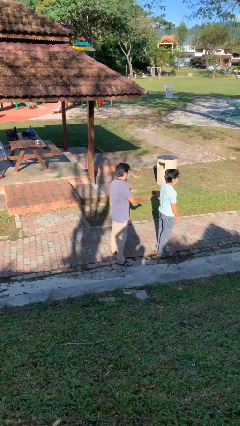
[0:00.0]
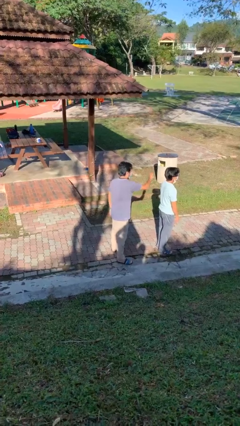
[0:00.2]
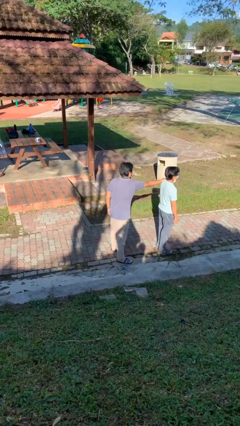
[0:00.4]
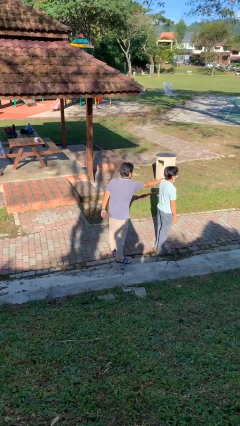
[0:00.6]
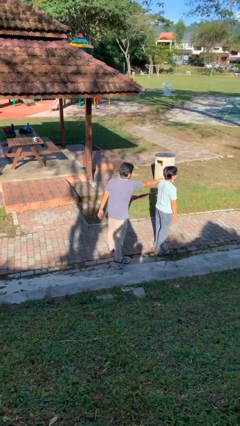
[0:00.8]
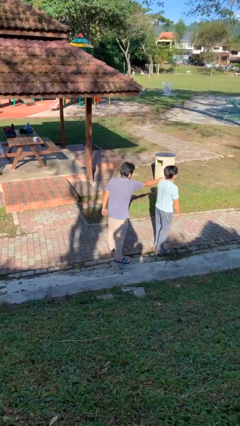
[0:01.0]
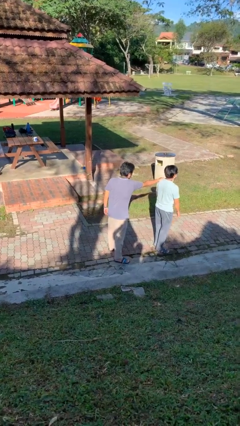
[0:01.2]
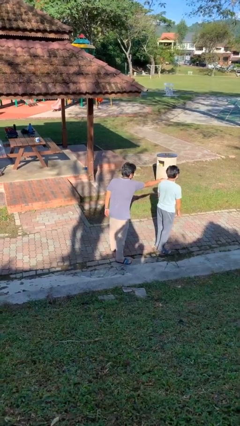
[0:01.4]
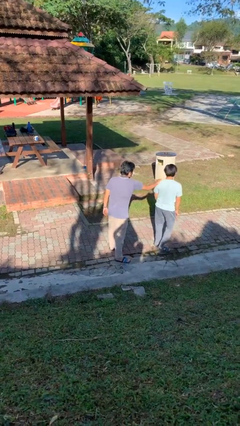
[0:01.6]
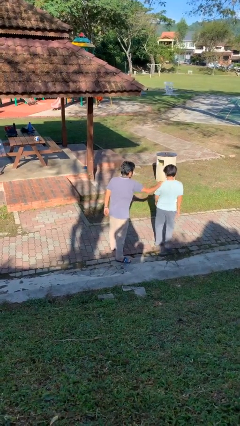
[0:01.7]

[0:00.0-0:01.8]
person grabs person by shoulder

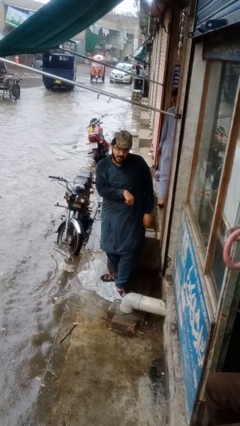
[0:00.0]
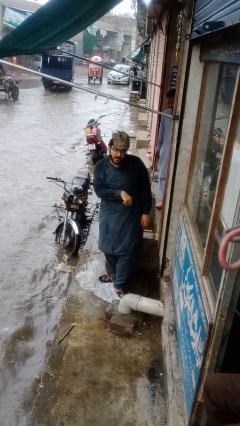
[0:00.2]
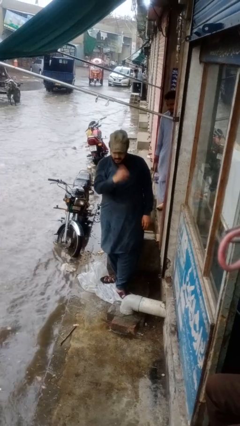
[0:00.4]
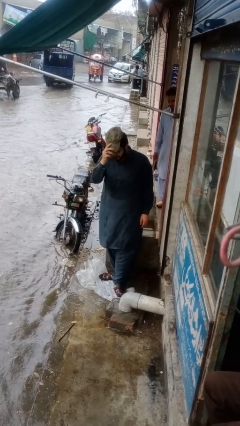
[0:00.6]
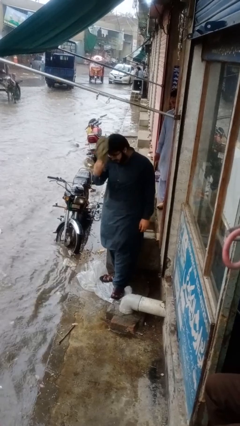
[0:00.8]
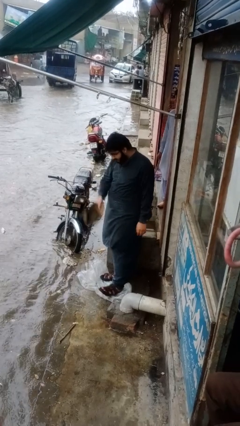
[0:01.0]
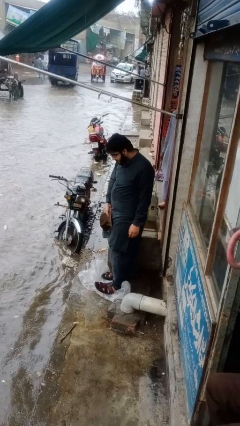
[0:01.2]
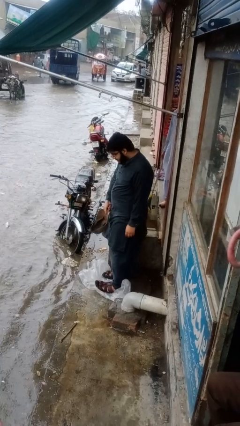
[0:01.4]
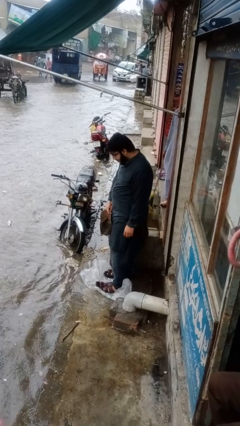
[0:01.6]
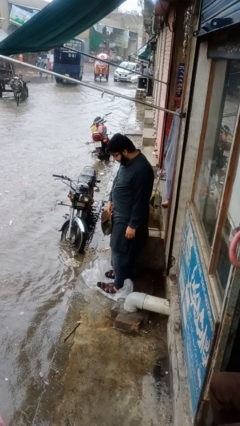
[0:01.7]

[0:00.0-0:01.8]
person takes off hat

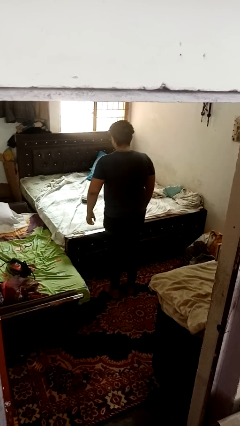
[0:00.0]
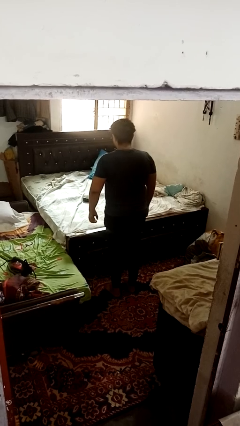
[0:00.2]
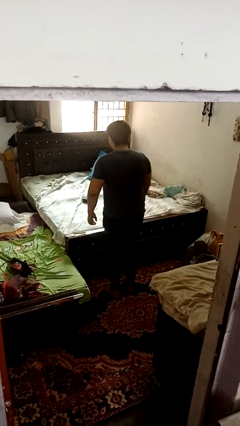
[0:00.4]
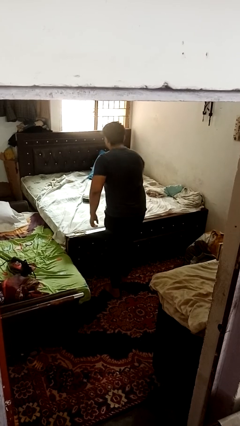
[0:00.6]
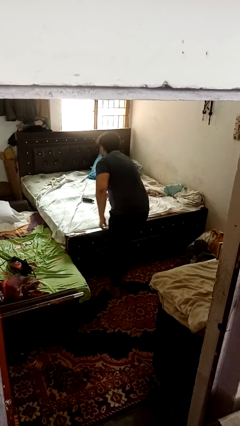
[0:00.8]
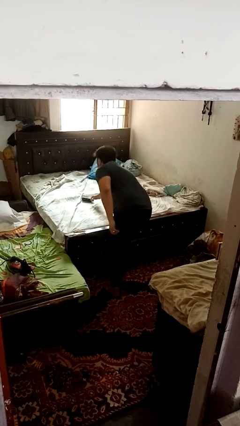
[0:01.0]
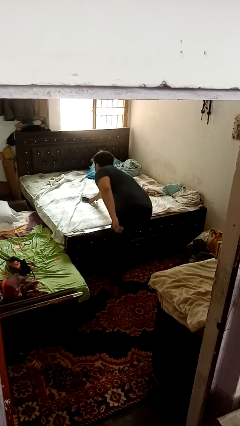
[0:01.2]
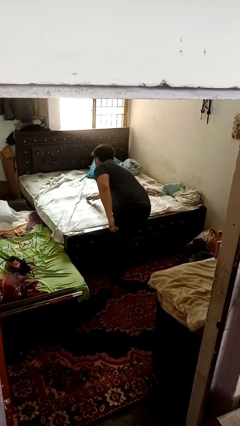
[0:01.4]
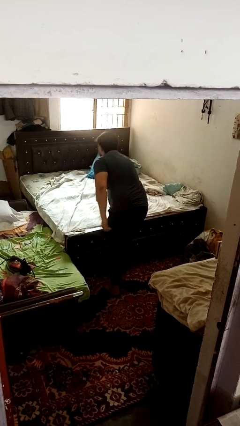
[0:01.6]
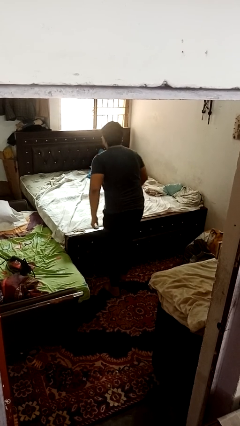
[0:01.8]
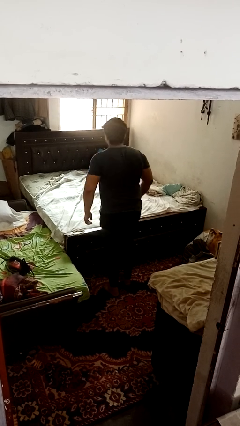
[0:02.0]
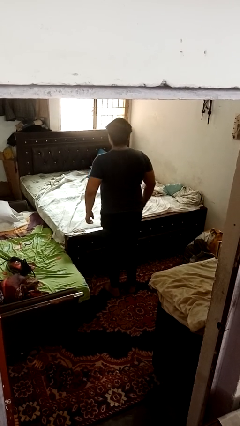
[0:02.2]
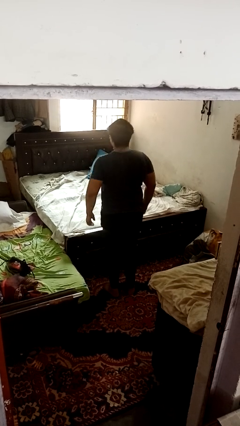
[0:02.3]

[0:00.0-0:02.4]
person picks up object from bed

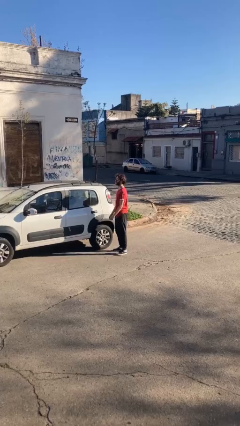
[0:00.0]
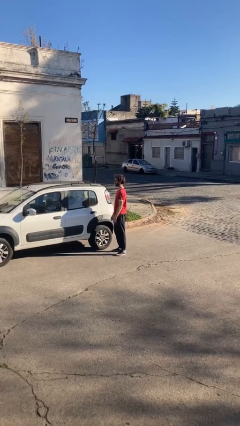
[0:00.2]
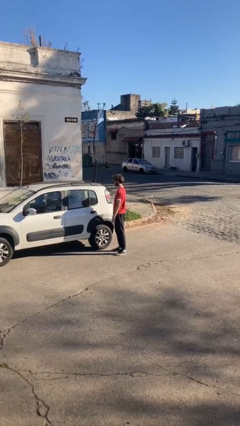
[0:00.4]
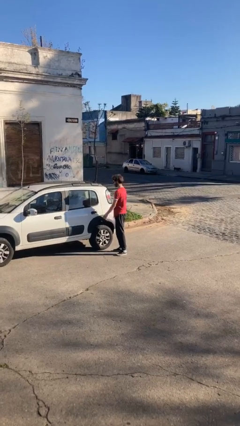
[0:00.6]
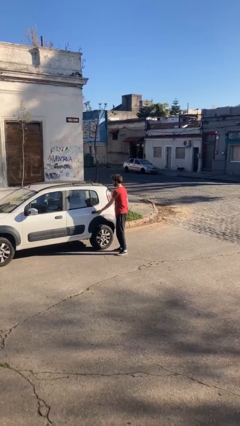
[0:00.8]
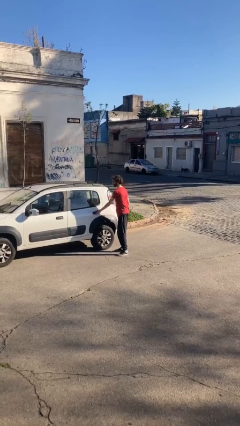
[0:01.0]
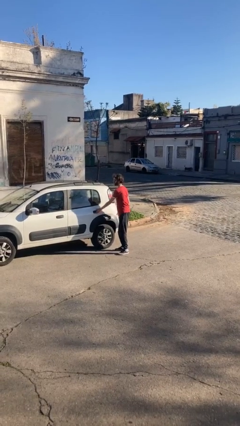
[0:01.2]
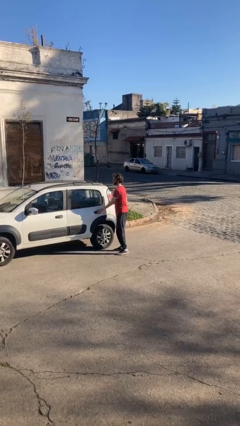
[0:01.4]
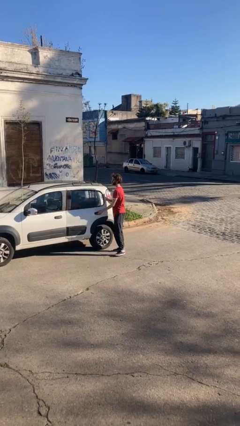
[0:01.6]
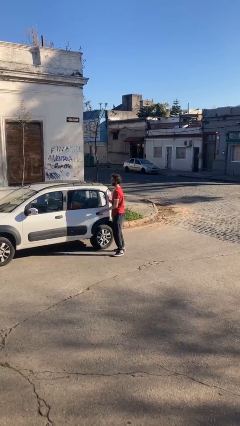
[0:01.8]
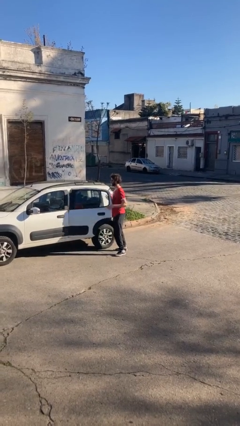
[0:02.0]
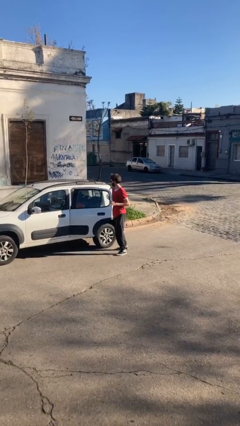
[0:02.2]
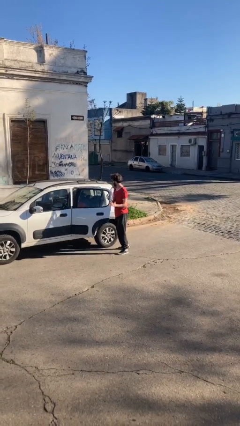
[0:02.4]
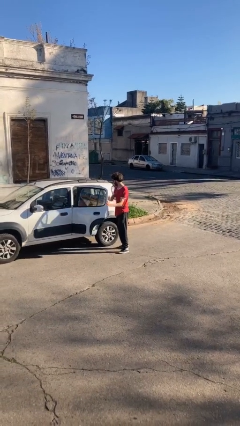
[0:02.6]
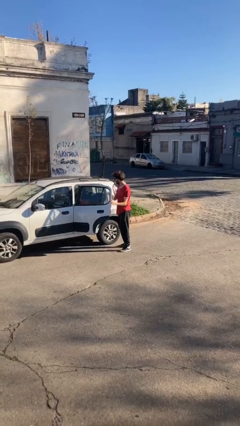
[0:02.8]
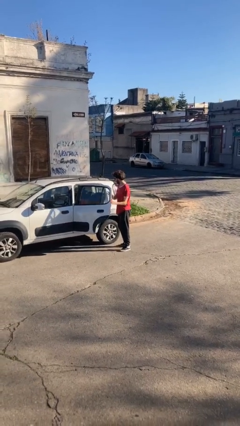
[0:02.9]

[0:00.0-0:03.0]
person opens car door

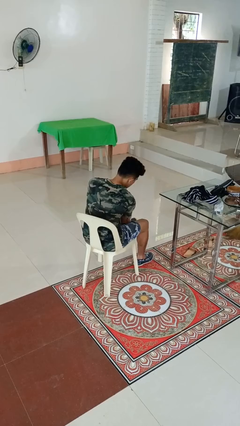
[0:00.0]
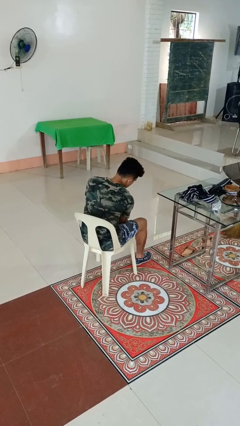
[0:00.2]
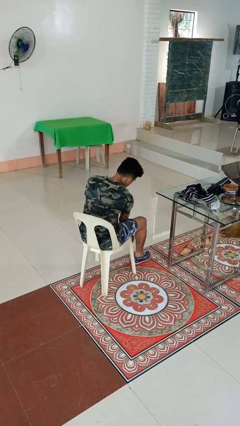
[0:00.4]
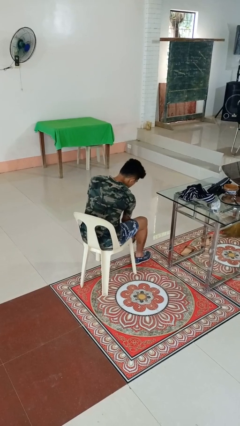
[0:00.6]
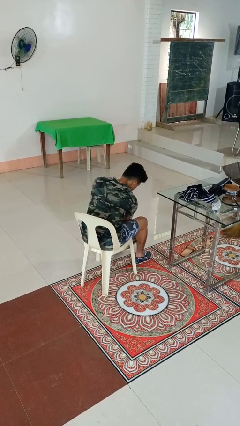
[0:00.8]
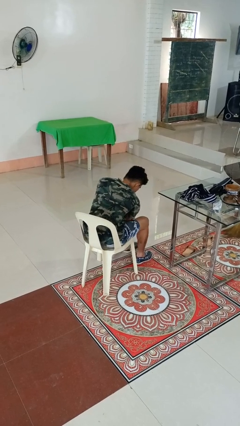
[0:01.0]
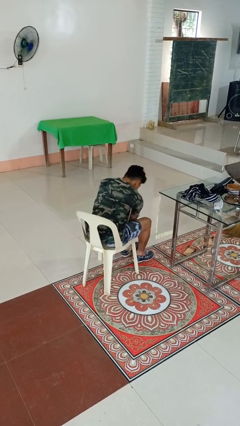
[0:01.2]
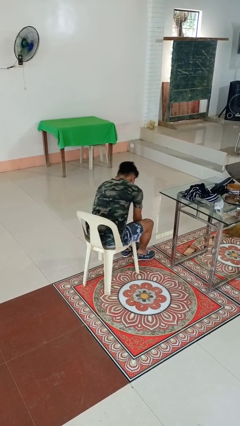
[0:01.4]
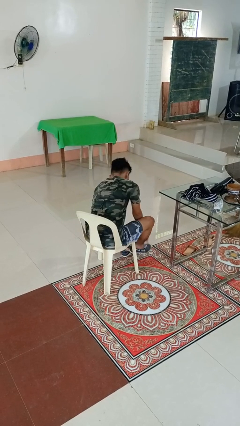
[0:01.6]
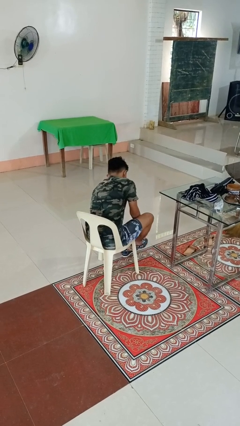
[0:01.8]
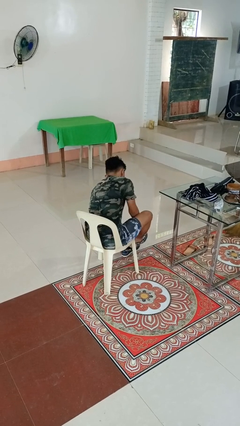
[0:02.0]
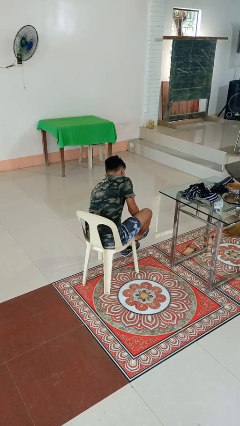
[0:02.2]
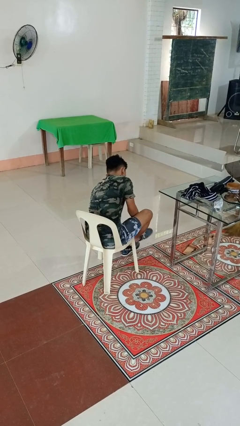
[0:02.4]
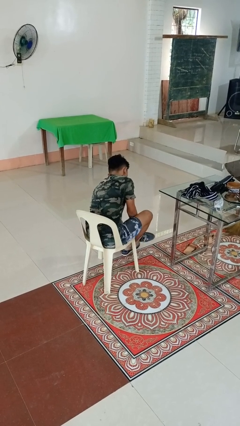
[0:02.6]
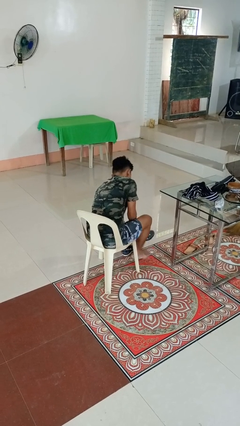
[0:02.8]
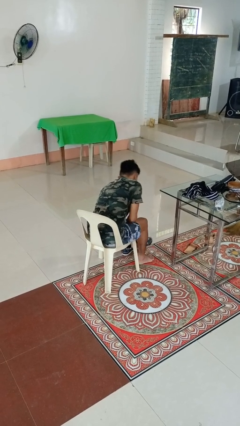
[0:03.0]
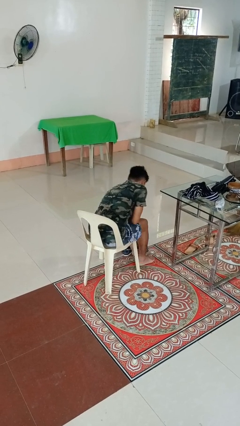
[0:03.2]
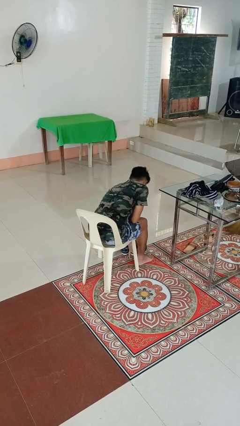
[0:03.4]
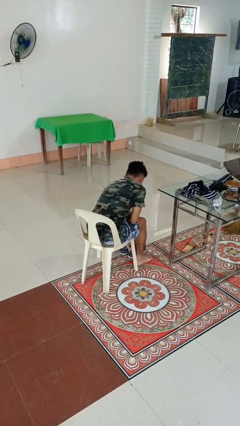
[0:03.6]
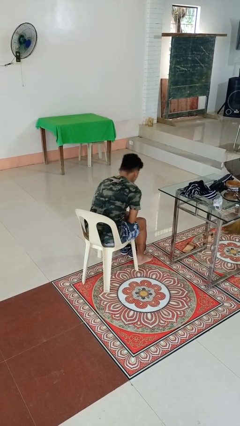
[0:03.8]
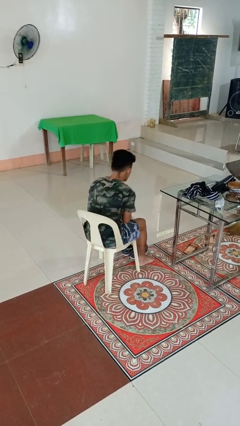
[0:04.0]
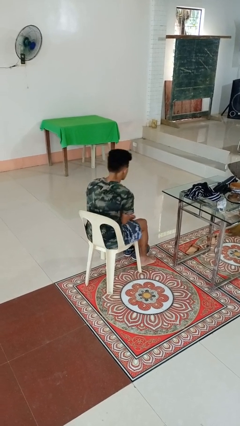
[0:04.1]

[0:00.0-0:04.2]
person takes off shoes

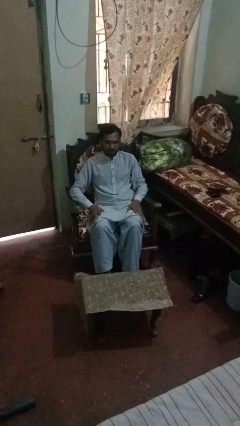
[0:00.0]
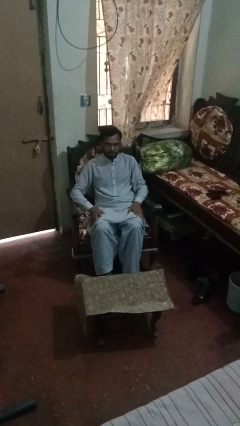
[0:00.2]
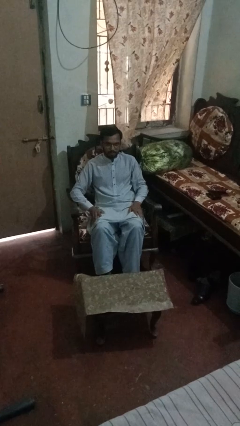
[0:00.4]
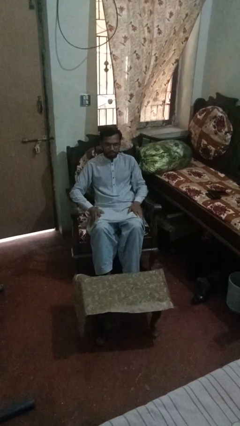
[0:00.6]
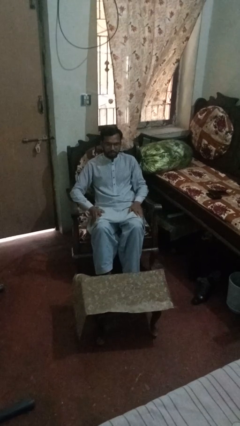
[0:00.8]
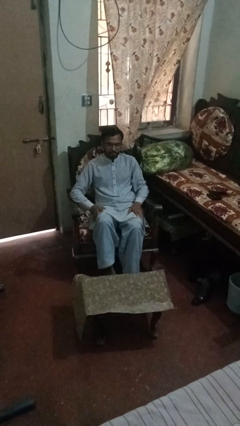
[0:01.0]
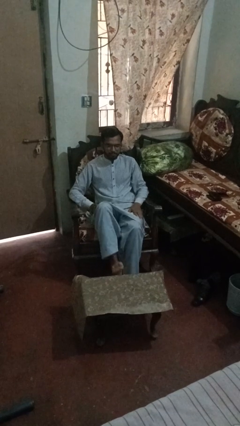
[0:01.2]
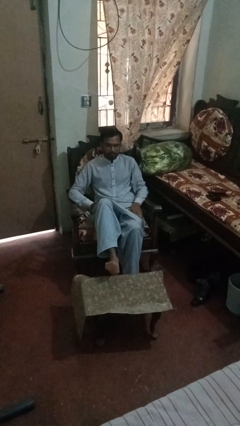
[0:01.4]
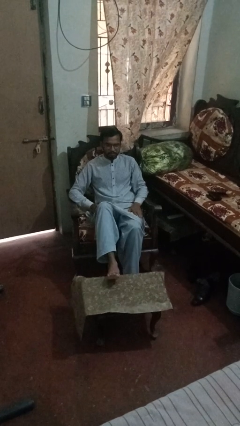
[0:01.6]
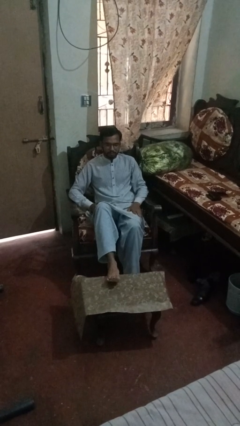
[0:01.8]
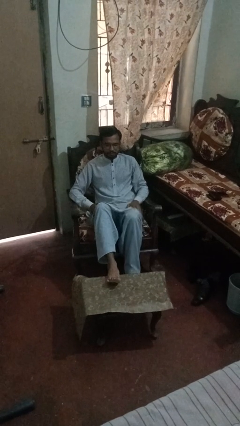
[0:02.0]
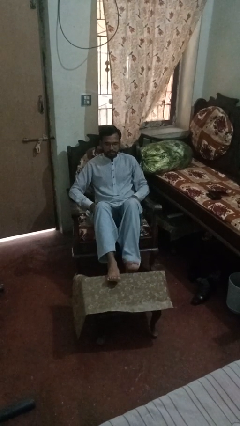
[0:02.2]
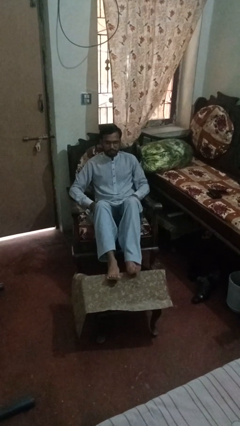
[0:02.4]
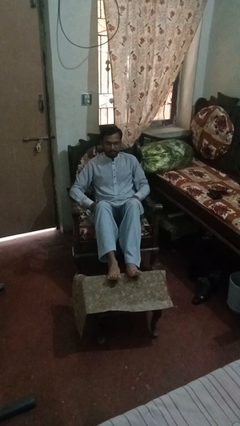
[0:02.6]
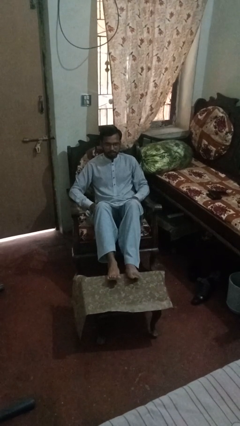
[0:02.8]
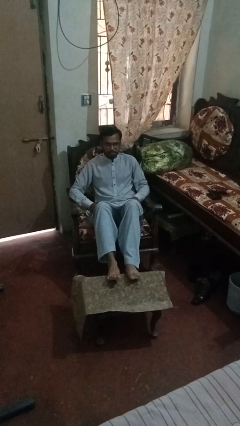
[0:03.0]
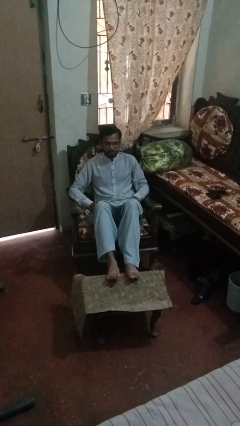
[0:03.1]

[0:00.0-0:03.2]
person puts feet up

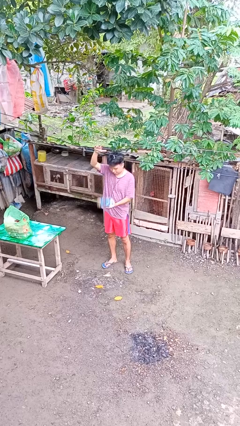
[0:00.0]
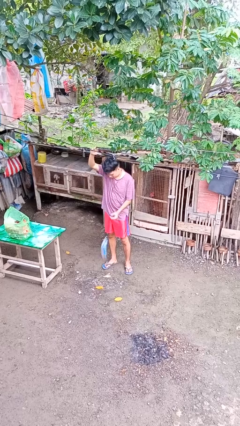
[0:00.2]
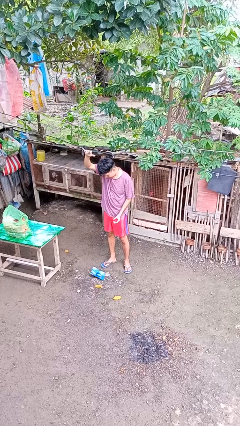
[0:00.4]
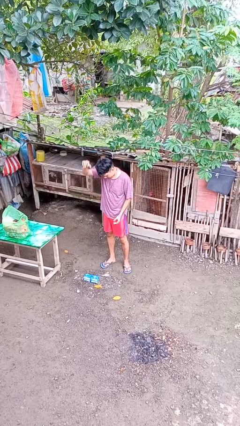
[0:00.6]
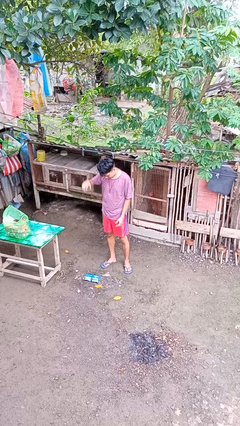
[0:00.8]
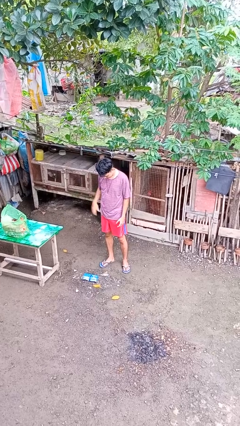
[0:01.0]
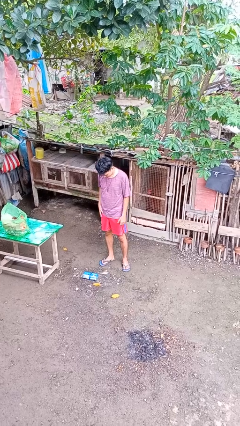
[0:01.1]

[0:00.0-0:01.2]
person drops object
